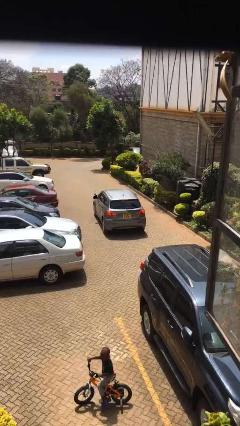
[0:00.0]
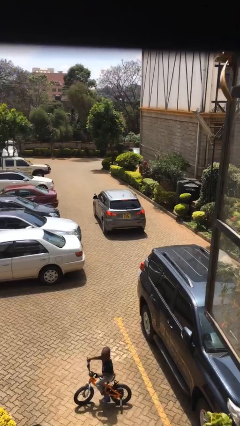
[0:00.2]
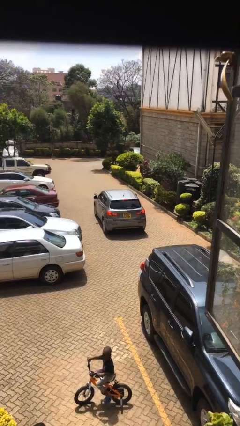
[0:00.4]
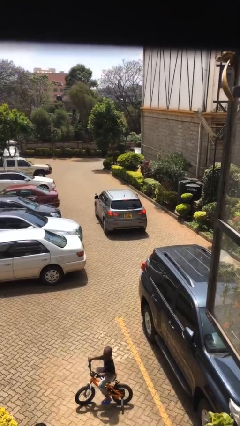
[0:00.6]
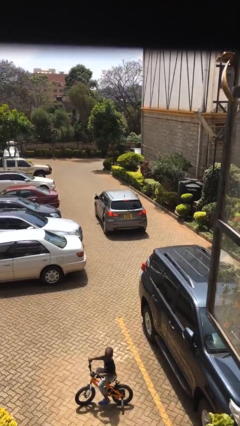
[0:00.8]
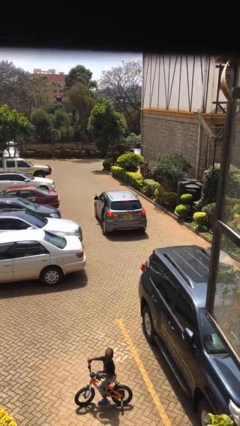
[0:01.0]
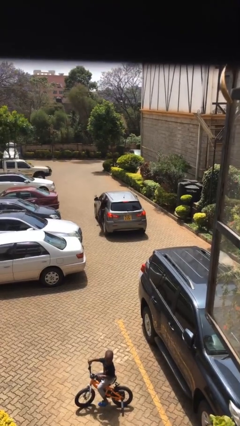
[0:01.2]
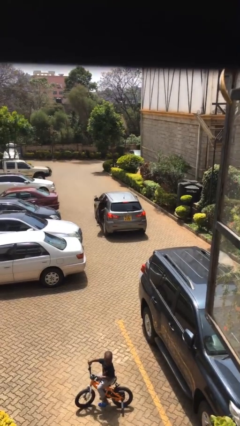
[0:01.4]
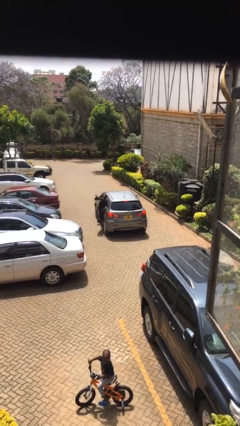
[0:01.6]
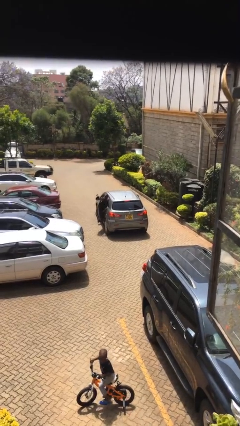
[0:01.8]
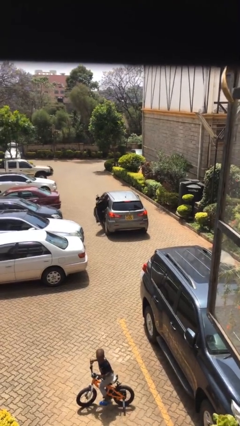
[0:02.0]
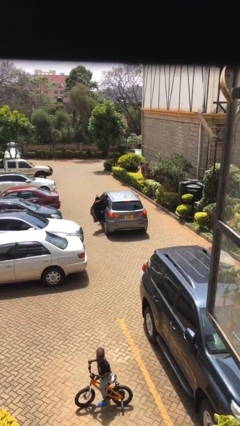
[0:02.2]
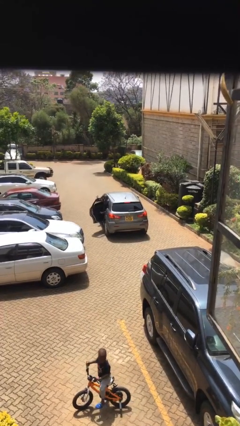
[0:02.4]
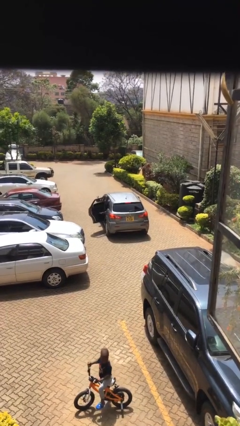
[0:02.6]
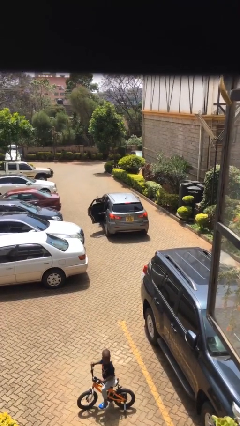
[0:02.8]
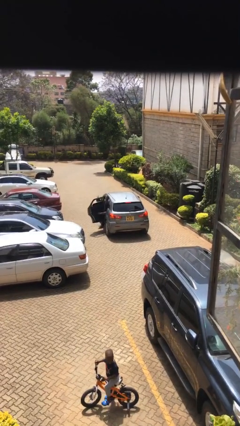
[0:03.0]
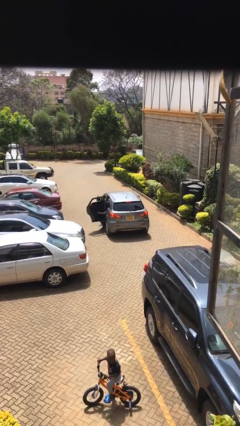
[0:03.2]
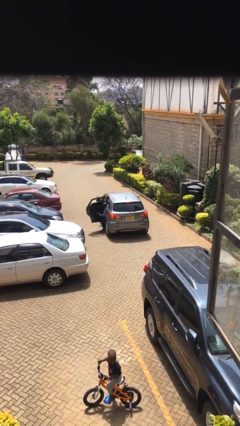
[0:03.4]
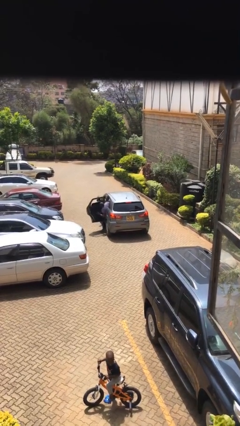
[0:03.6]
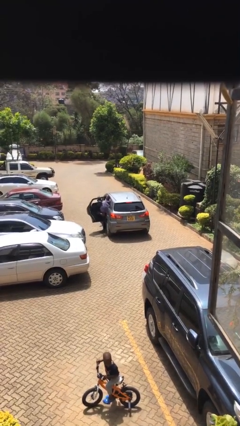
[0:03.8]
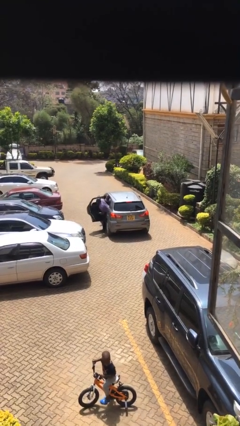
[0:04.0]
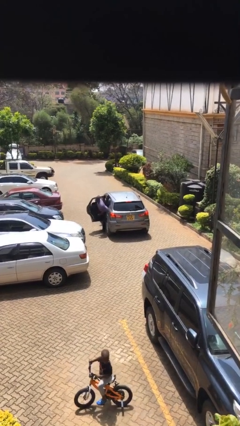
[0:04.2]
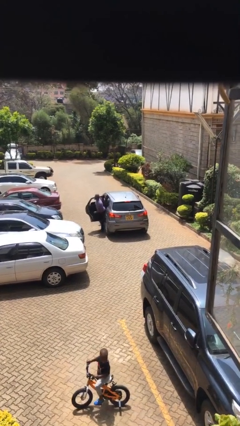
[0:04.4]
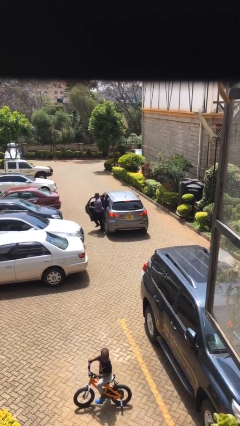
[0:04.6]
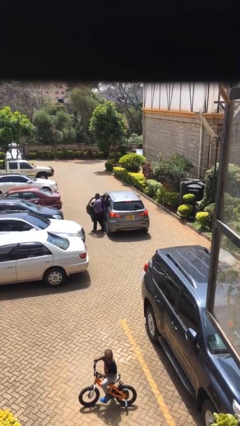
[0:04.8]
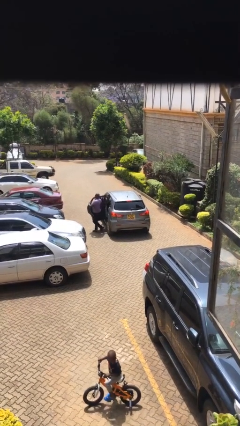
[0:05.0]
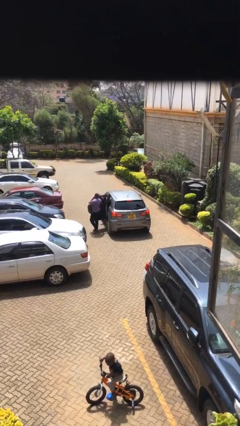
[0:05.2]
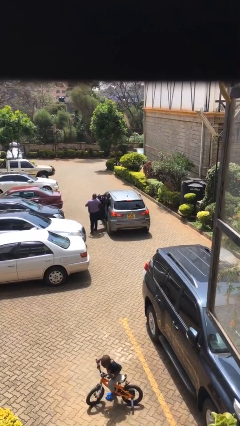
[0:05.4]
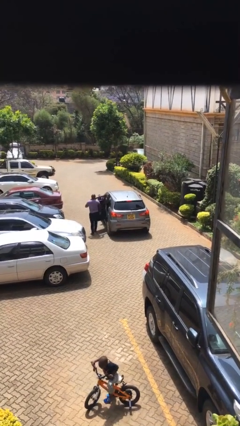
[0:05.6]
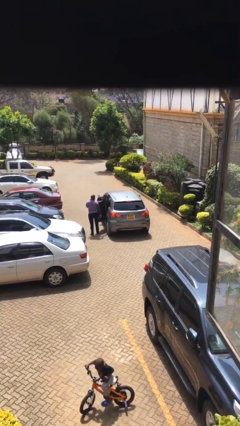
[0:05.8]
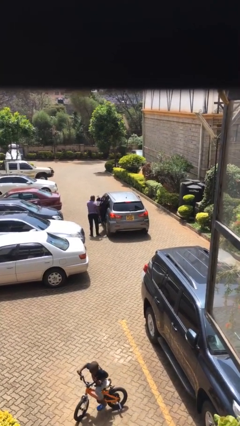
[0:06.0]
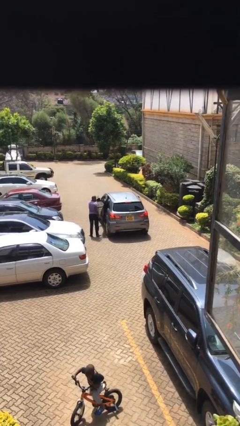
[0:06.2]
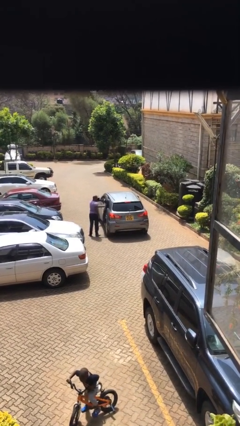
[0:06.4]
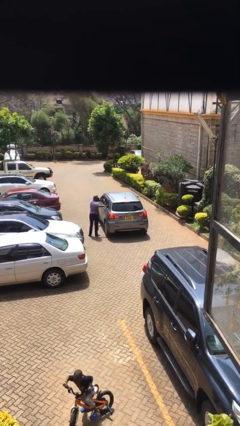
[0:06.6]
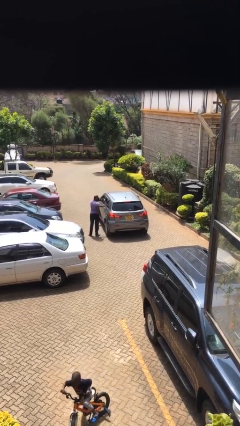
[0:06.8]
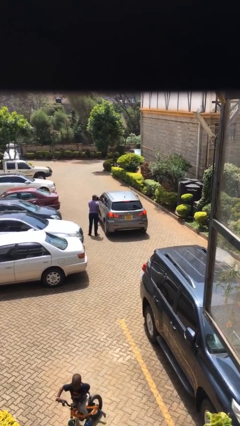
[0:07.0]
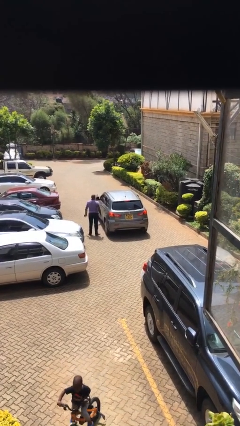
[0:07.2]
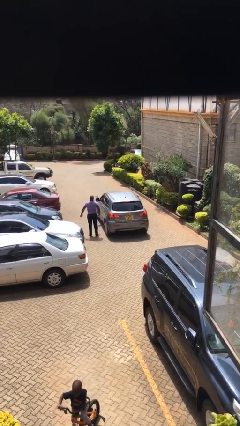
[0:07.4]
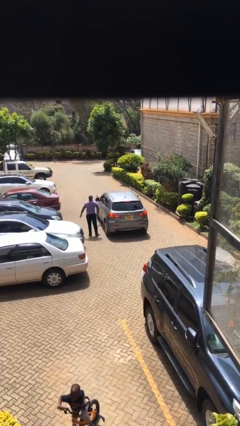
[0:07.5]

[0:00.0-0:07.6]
car drops off person

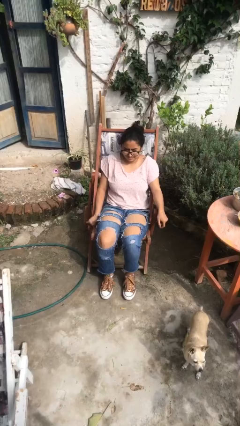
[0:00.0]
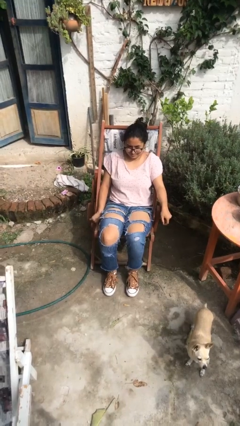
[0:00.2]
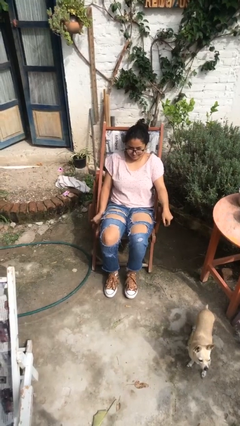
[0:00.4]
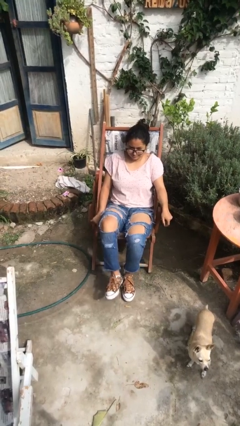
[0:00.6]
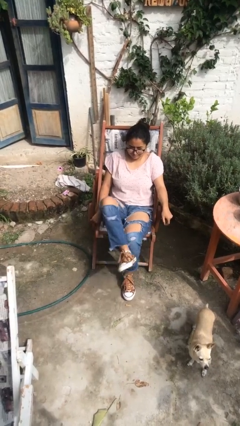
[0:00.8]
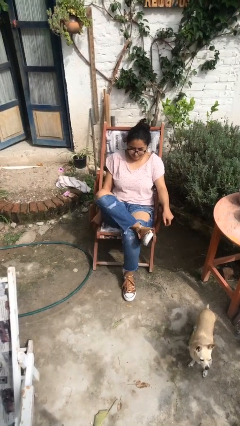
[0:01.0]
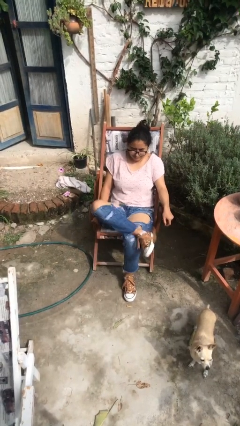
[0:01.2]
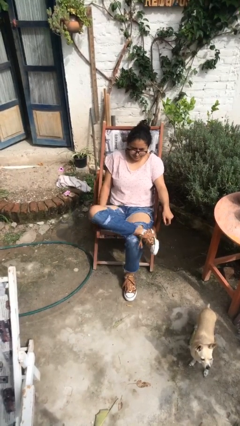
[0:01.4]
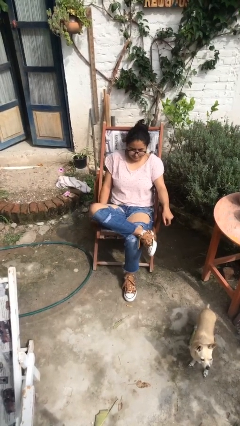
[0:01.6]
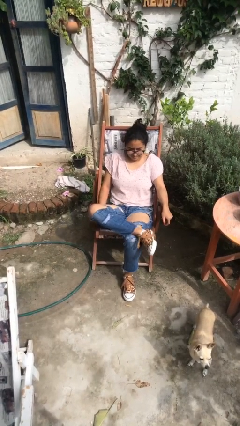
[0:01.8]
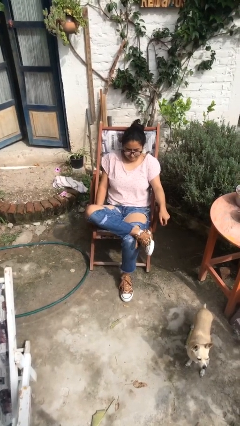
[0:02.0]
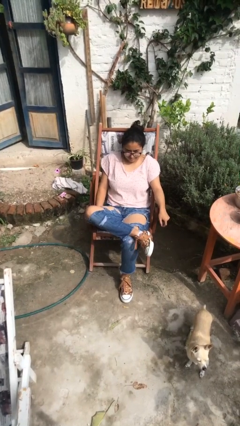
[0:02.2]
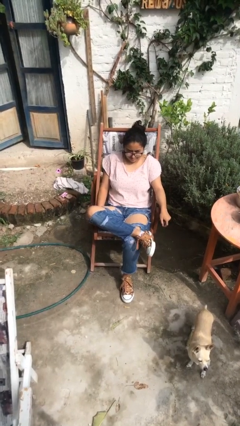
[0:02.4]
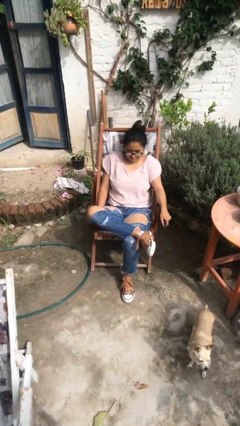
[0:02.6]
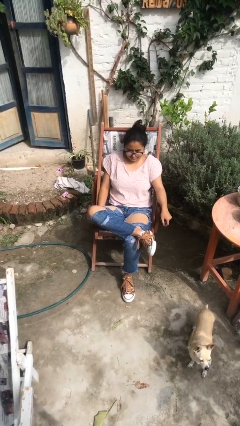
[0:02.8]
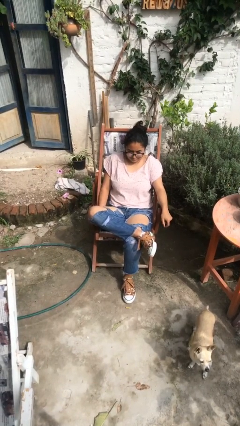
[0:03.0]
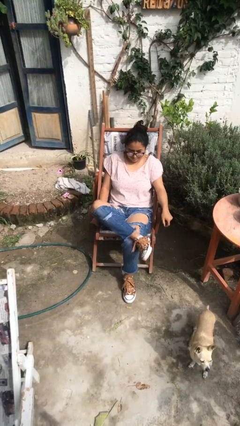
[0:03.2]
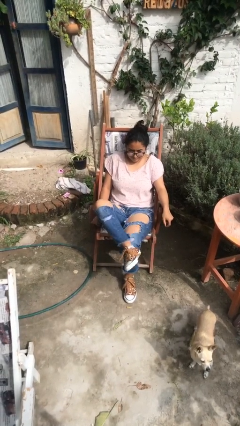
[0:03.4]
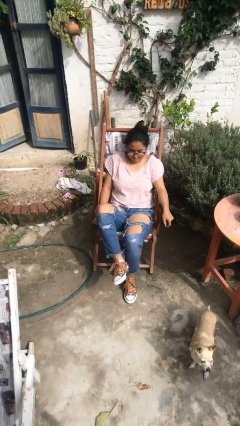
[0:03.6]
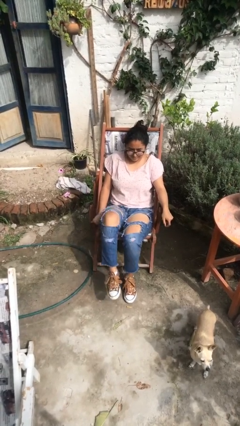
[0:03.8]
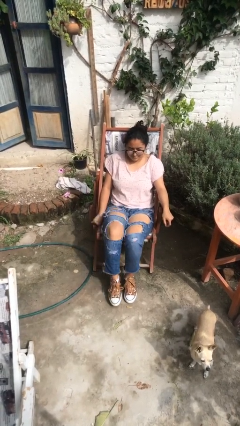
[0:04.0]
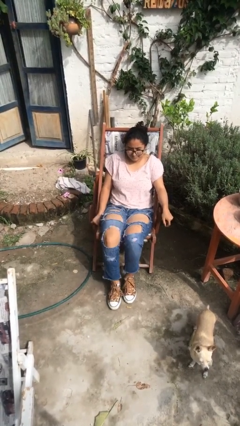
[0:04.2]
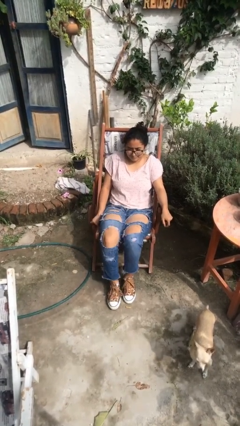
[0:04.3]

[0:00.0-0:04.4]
person crosses legs

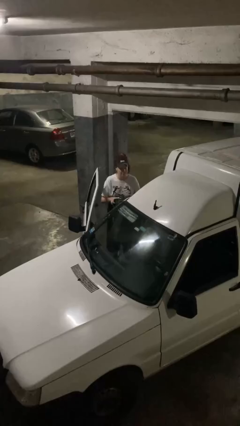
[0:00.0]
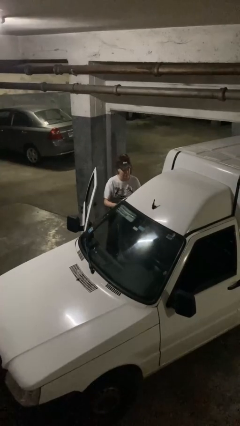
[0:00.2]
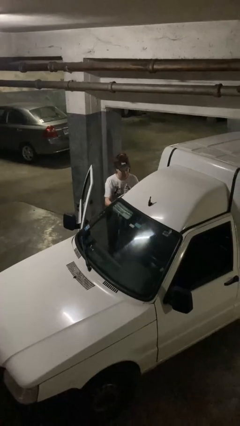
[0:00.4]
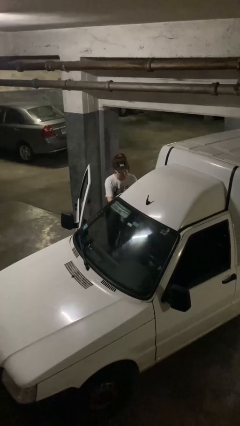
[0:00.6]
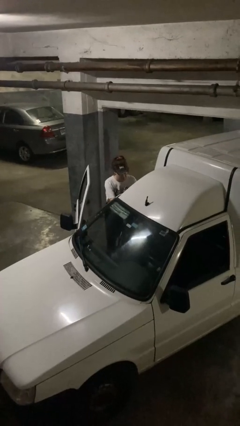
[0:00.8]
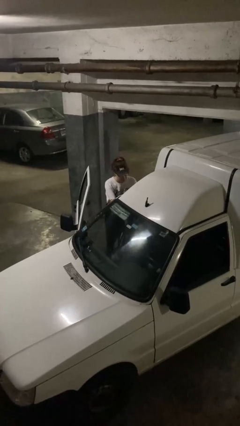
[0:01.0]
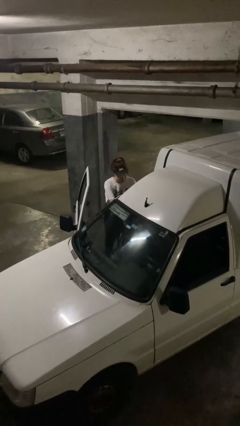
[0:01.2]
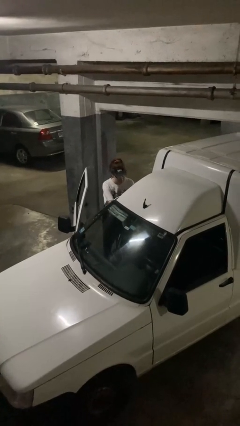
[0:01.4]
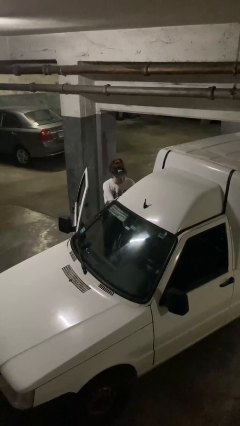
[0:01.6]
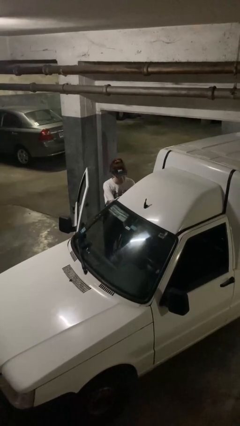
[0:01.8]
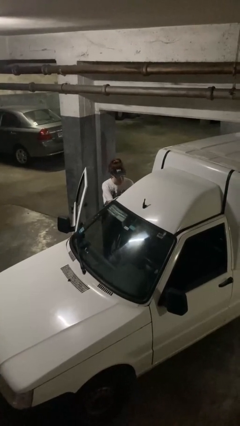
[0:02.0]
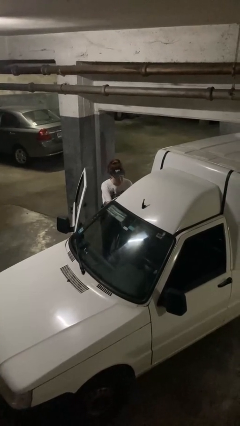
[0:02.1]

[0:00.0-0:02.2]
person loads car

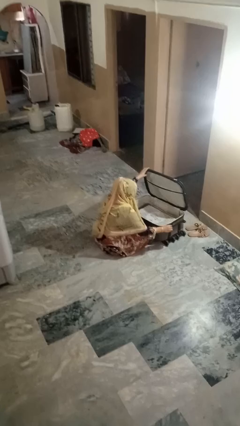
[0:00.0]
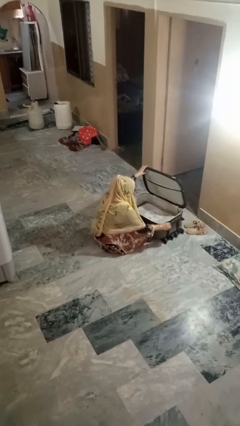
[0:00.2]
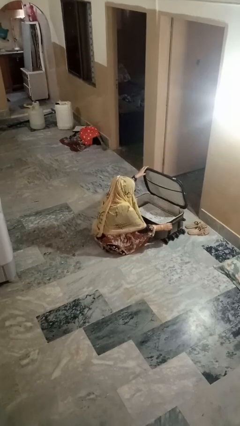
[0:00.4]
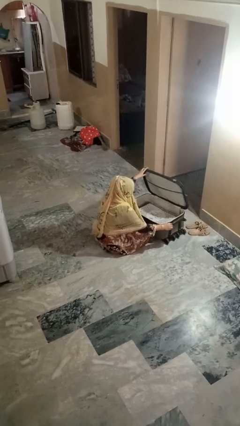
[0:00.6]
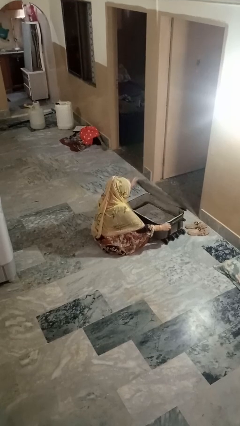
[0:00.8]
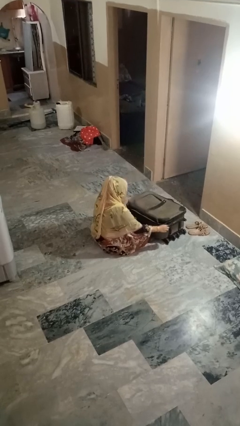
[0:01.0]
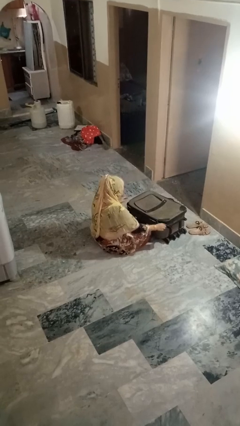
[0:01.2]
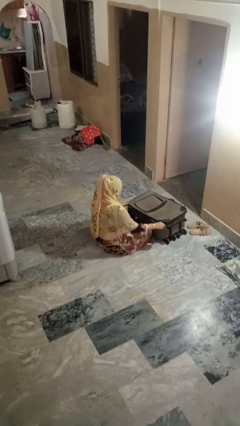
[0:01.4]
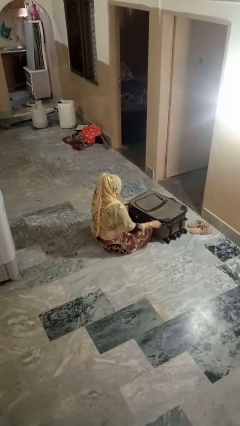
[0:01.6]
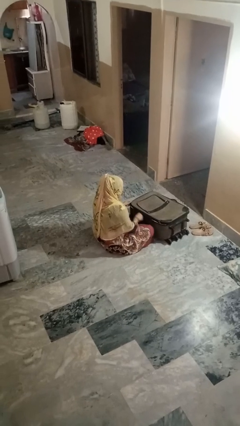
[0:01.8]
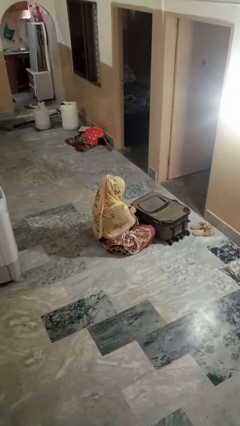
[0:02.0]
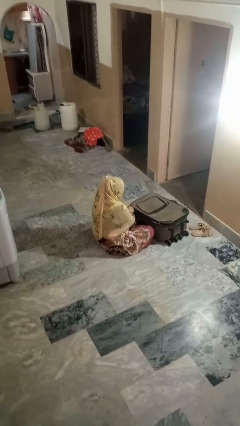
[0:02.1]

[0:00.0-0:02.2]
person closes suitcase

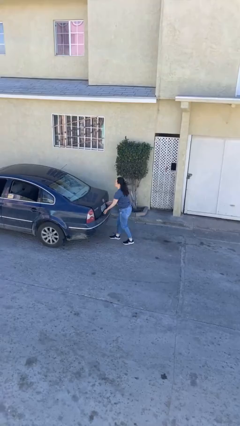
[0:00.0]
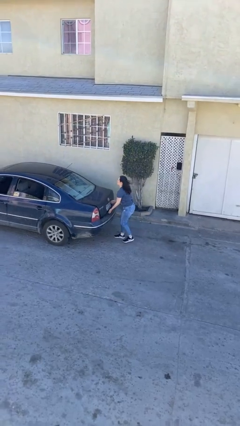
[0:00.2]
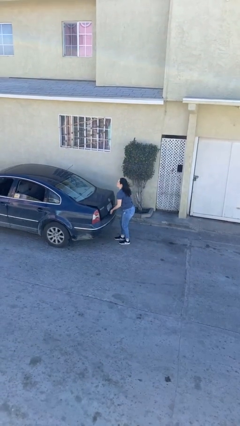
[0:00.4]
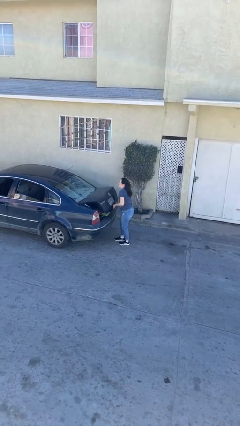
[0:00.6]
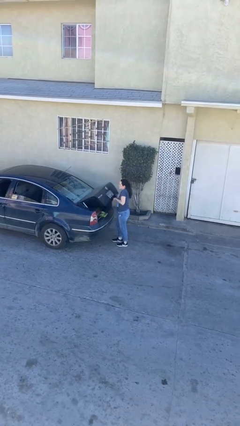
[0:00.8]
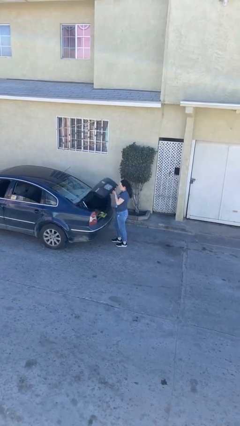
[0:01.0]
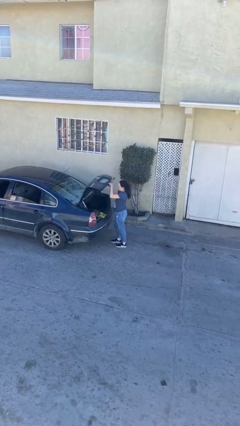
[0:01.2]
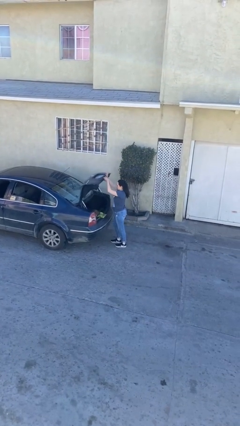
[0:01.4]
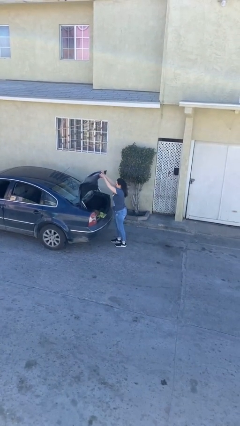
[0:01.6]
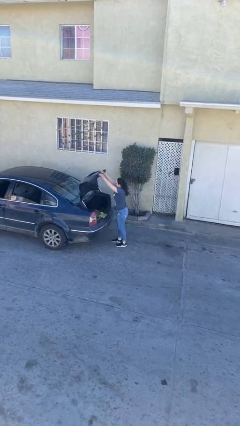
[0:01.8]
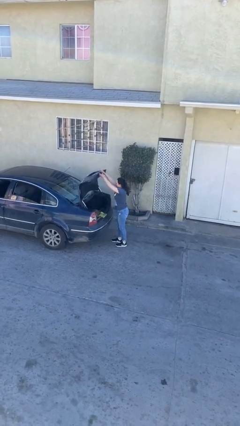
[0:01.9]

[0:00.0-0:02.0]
person opens car trunk
